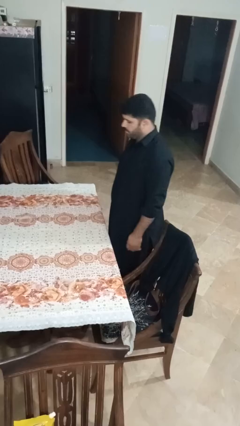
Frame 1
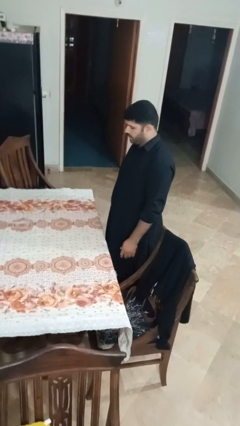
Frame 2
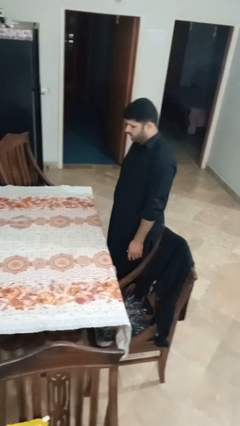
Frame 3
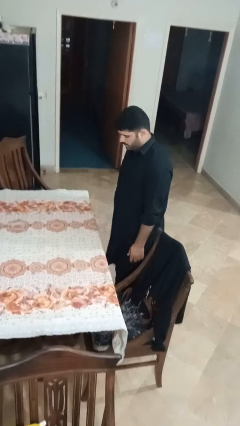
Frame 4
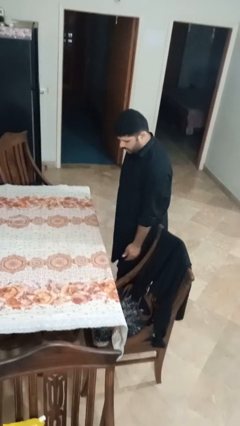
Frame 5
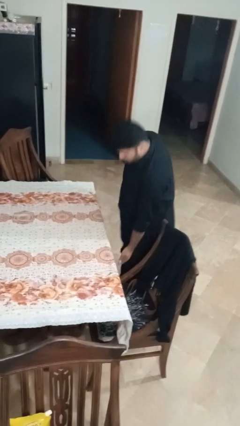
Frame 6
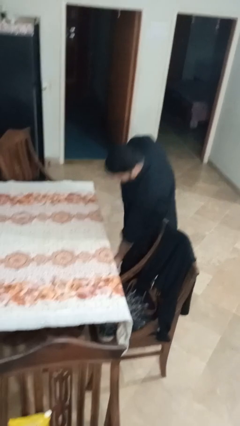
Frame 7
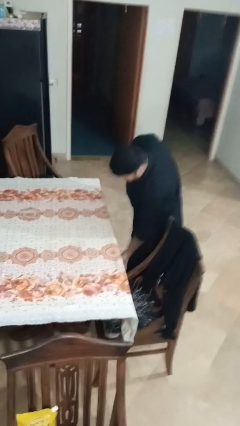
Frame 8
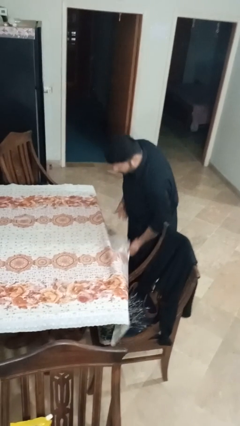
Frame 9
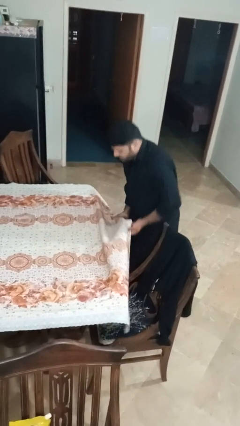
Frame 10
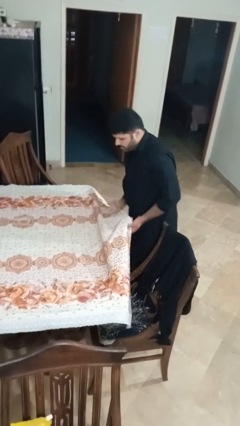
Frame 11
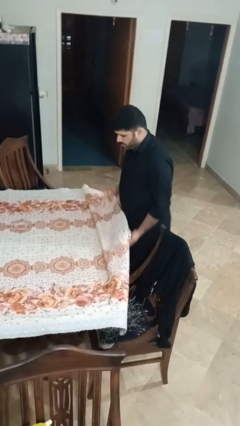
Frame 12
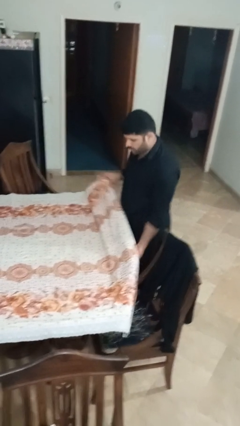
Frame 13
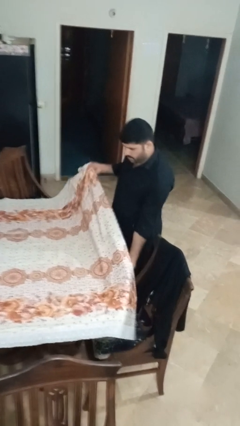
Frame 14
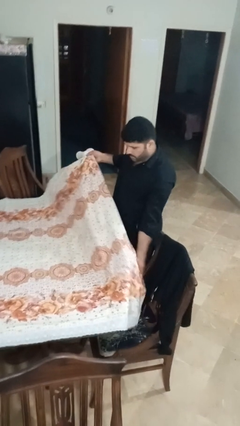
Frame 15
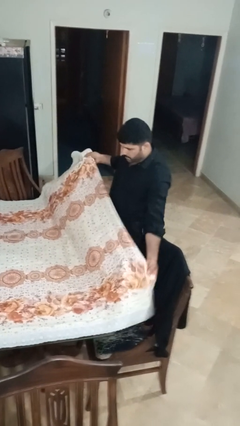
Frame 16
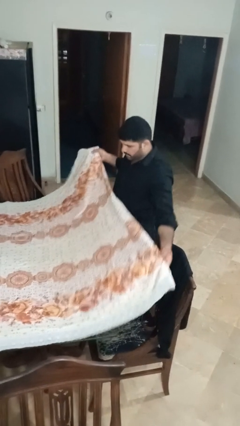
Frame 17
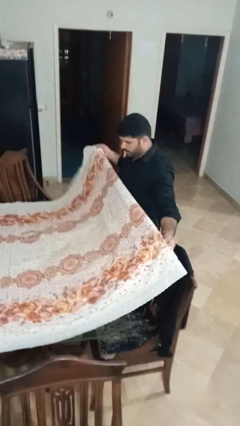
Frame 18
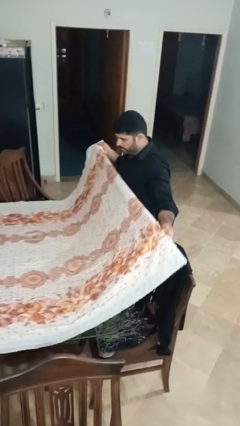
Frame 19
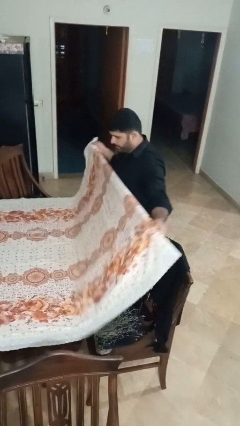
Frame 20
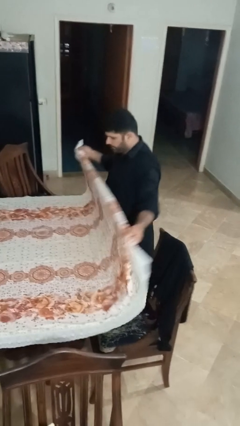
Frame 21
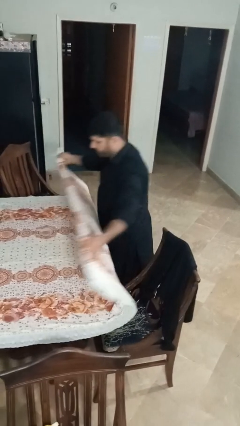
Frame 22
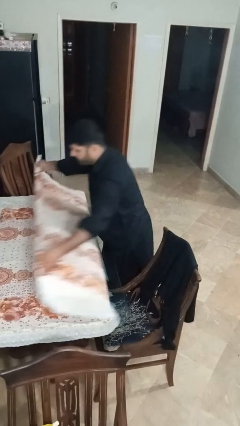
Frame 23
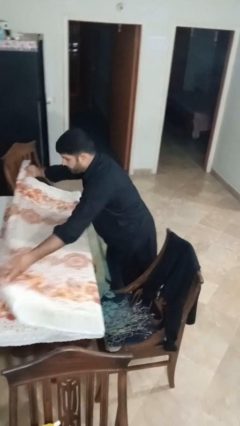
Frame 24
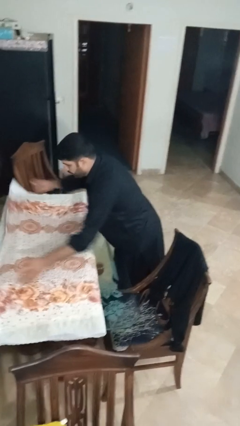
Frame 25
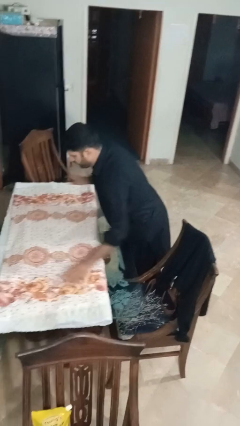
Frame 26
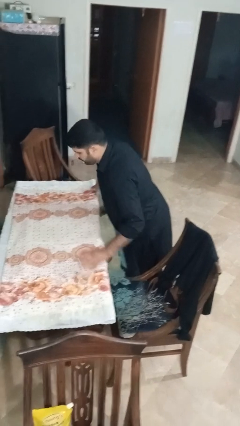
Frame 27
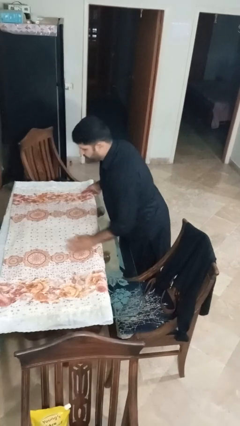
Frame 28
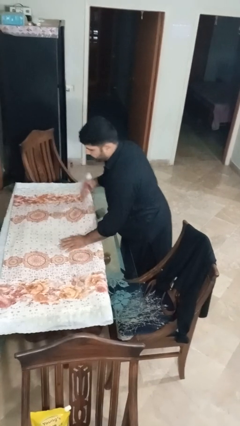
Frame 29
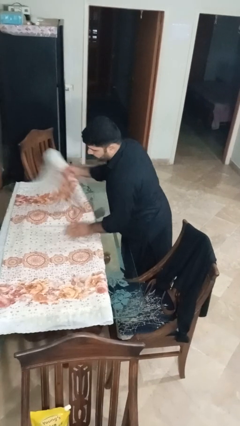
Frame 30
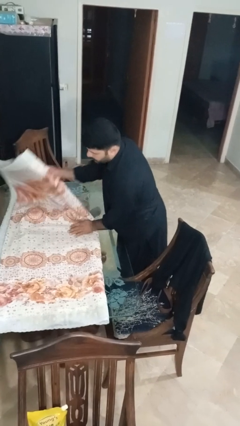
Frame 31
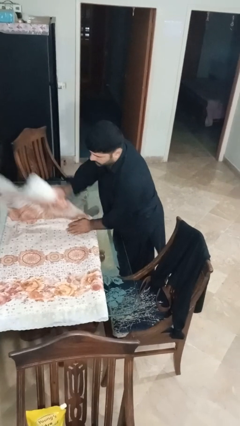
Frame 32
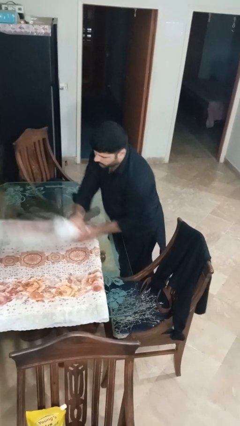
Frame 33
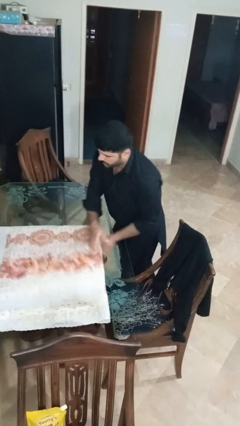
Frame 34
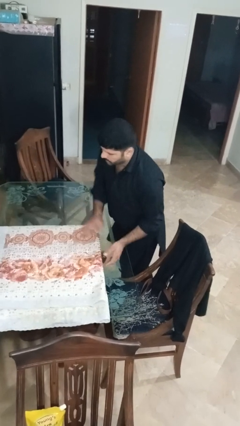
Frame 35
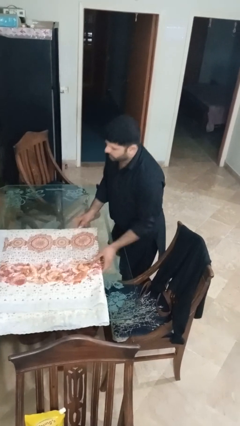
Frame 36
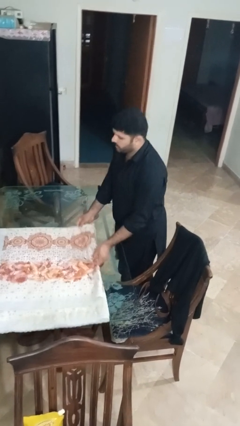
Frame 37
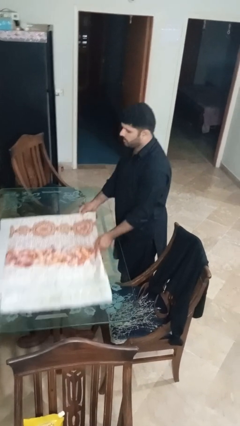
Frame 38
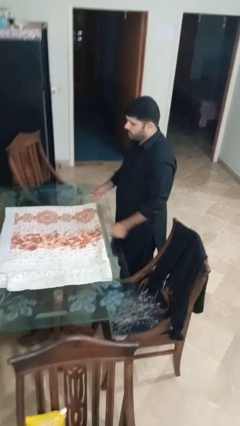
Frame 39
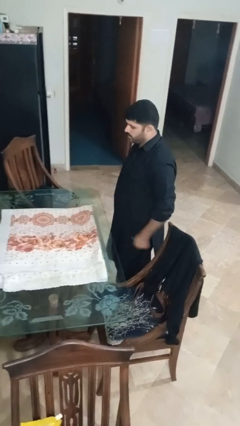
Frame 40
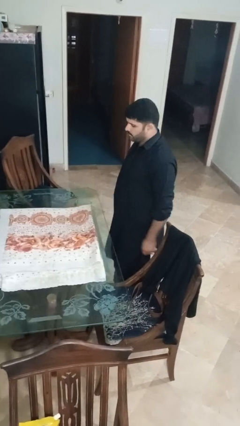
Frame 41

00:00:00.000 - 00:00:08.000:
person folds tablecloth

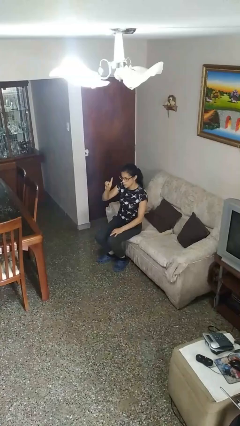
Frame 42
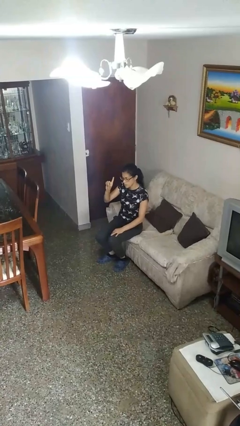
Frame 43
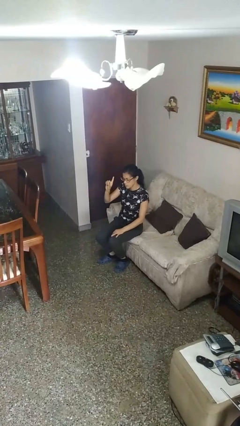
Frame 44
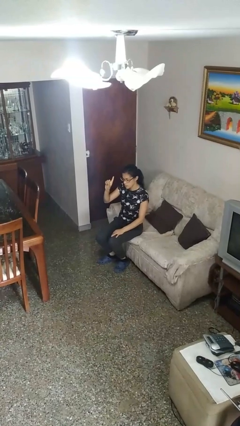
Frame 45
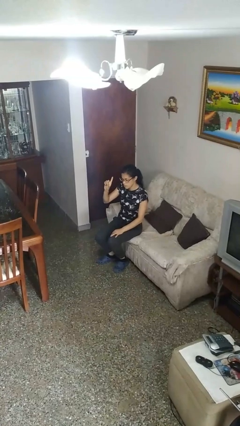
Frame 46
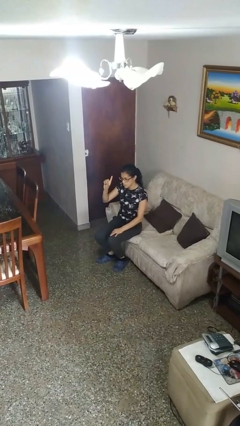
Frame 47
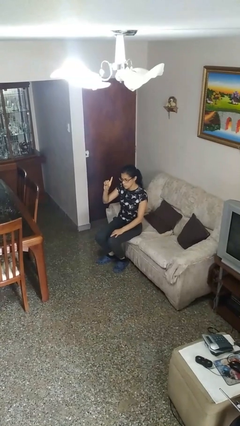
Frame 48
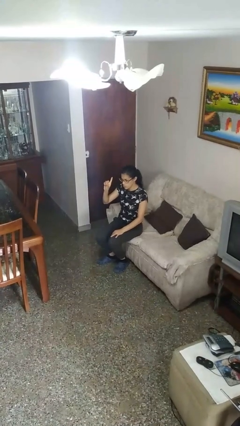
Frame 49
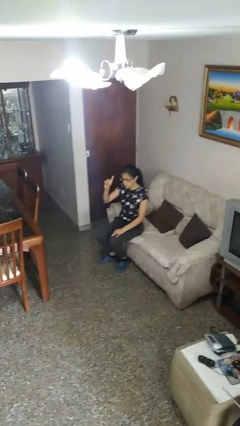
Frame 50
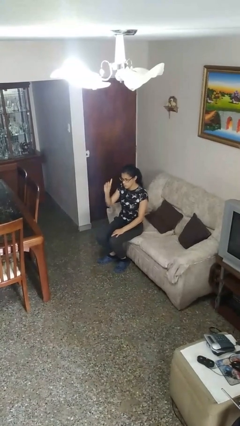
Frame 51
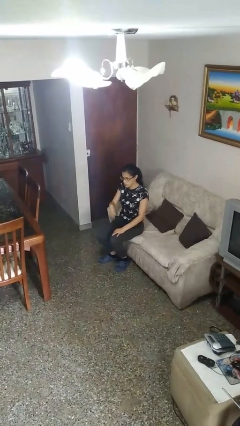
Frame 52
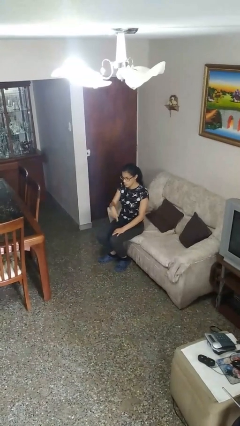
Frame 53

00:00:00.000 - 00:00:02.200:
person gestures swipe up

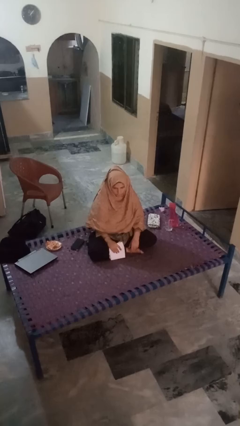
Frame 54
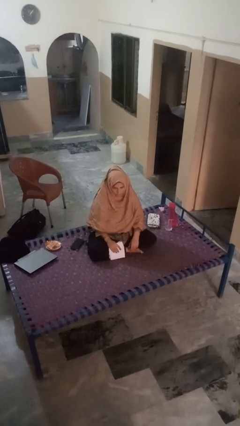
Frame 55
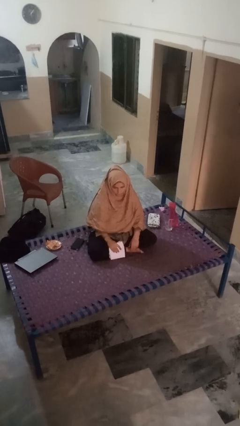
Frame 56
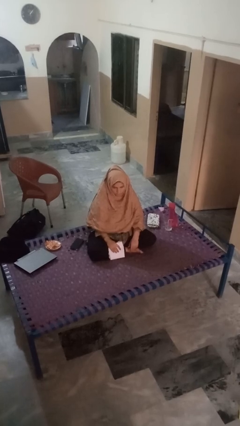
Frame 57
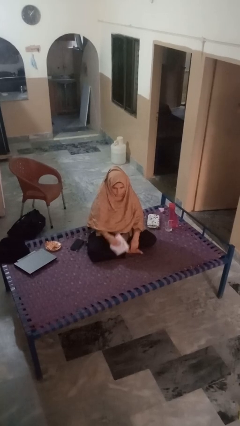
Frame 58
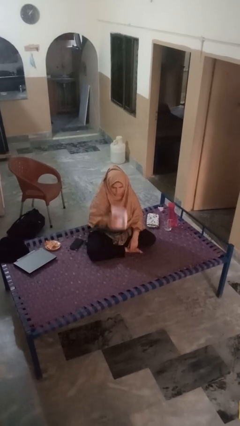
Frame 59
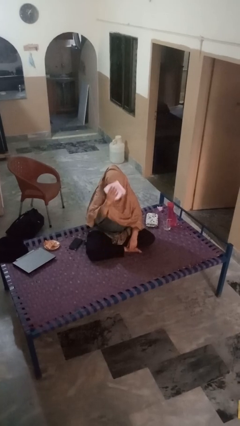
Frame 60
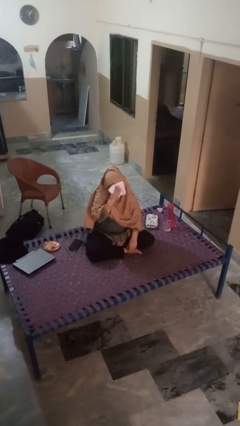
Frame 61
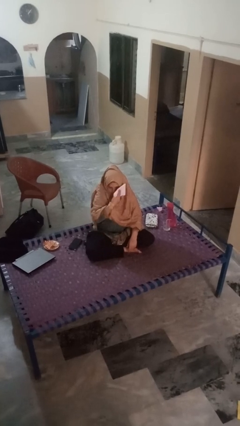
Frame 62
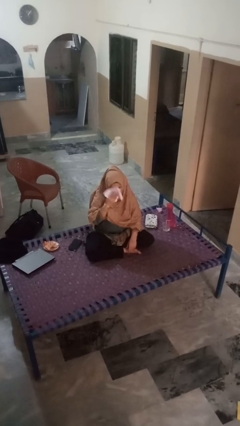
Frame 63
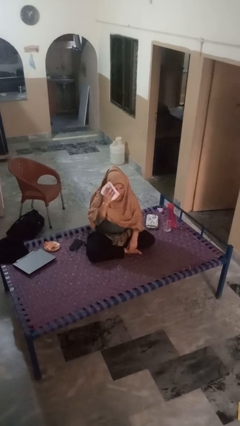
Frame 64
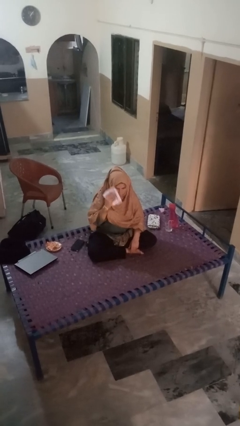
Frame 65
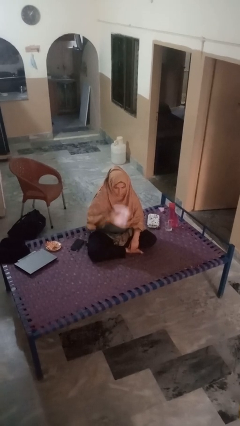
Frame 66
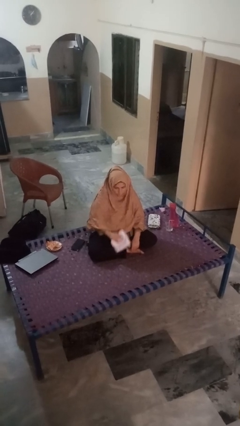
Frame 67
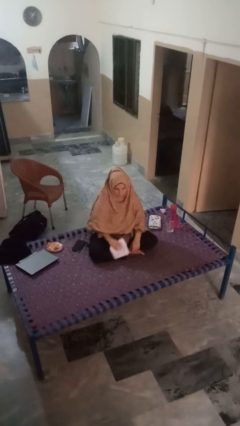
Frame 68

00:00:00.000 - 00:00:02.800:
person wipes mouth with napkin

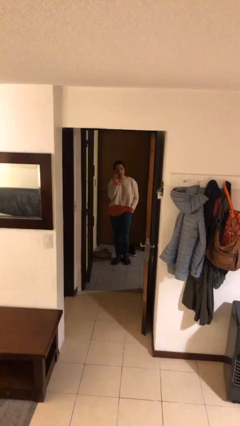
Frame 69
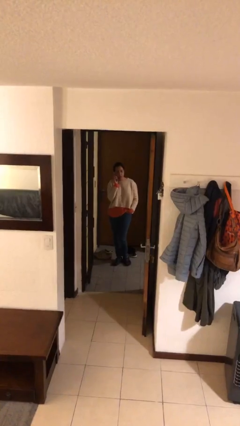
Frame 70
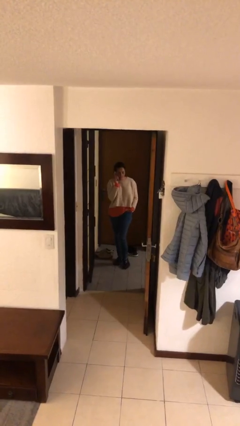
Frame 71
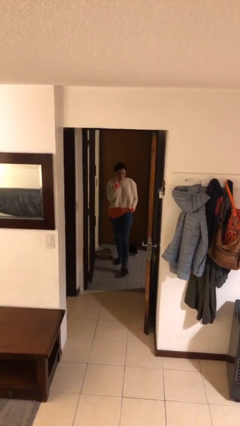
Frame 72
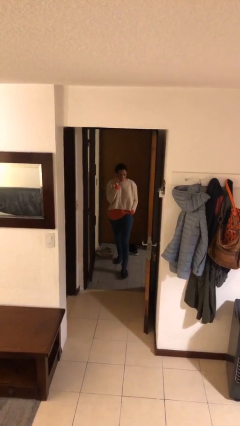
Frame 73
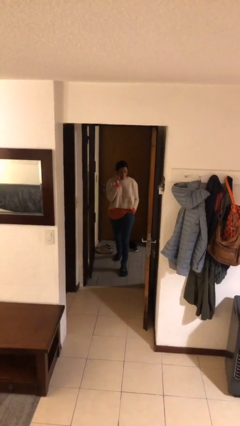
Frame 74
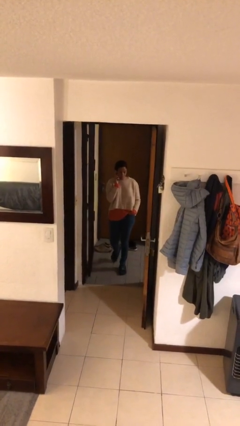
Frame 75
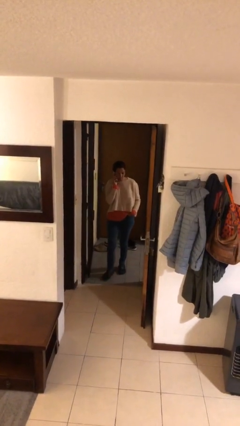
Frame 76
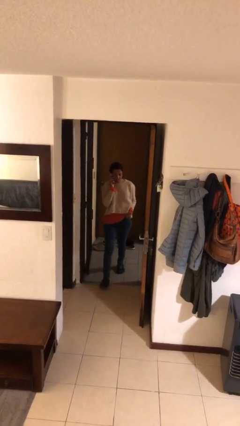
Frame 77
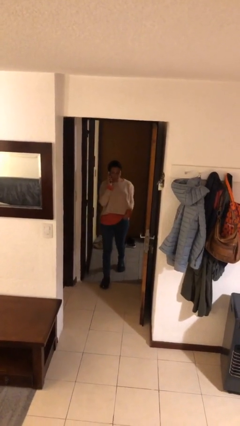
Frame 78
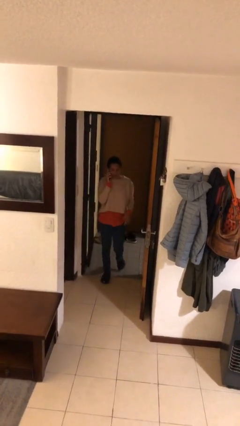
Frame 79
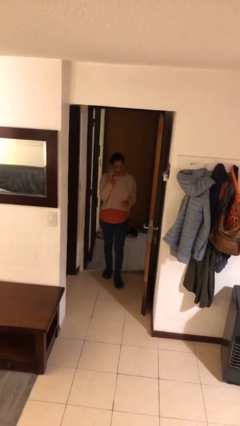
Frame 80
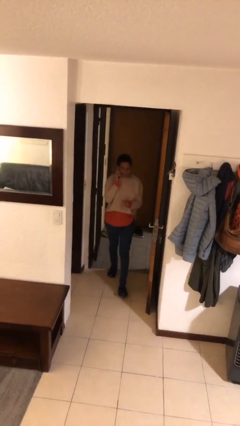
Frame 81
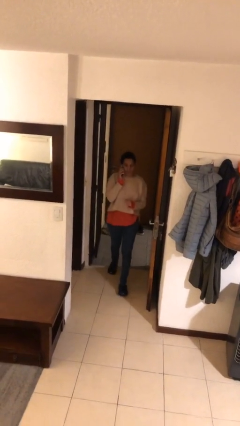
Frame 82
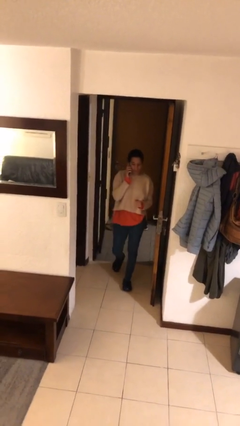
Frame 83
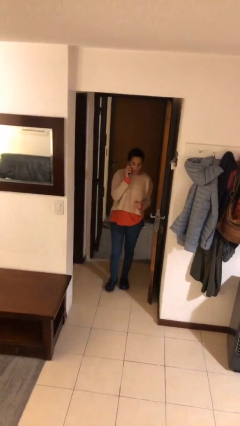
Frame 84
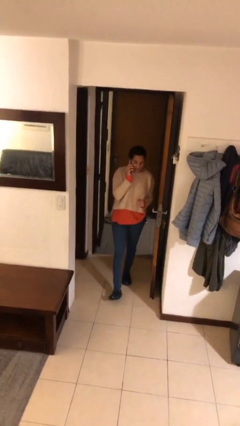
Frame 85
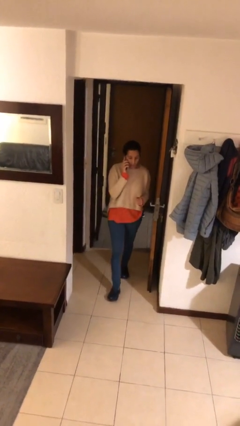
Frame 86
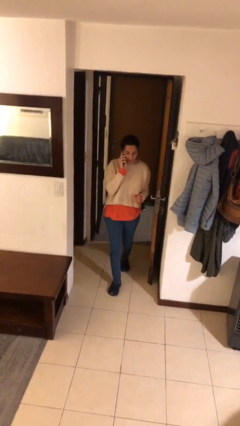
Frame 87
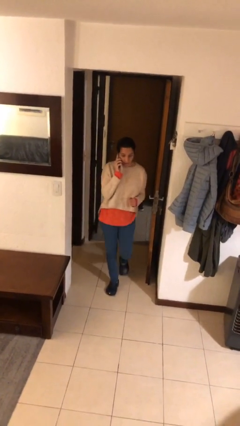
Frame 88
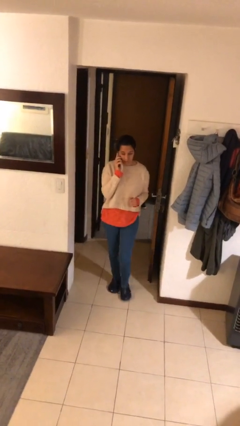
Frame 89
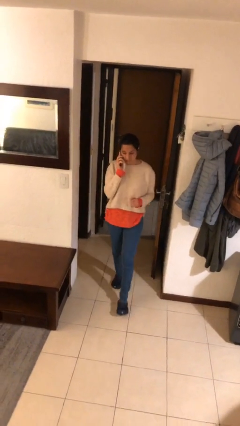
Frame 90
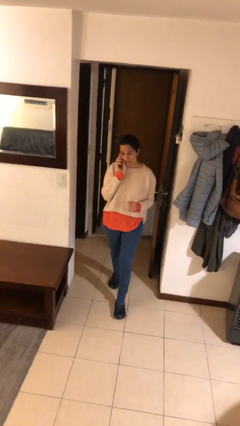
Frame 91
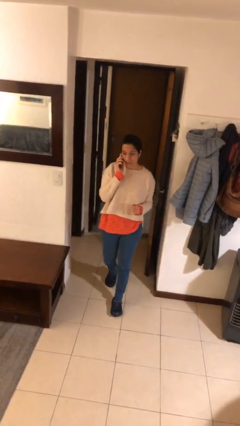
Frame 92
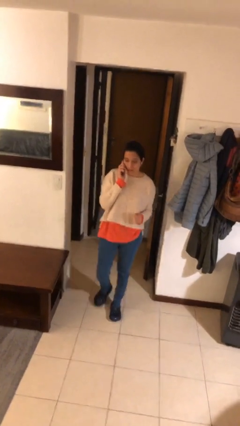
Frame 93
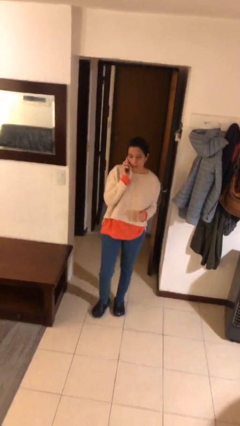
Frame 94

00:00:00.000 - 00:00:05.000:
person enters scene through structure
